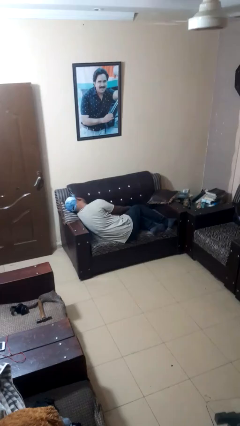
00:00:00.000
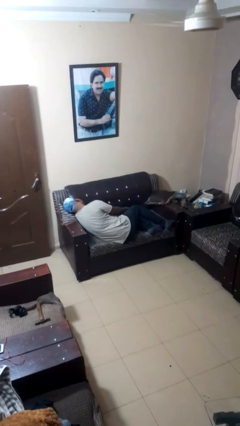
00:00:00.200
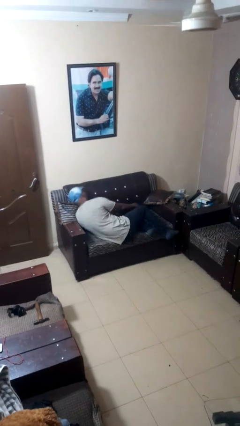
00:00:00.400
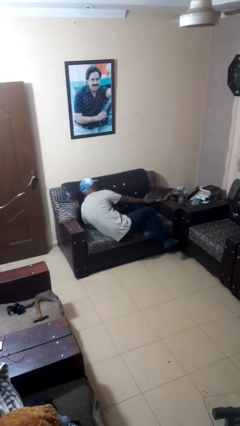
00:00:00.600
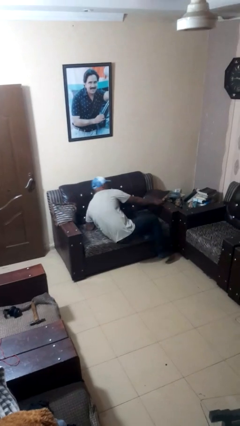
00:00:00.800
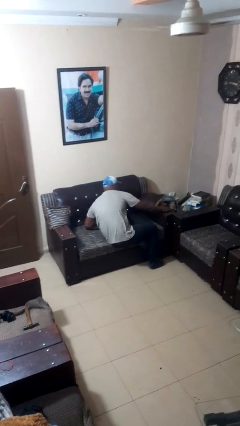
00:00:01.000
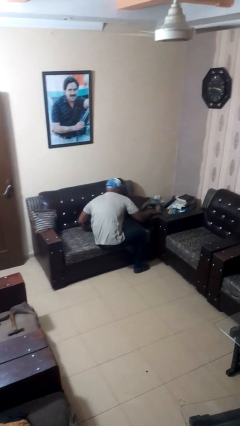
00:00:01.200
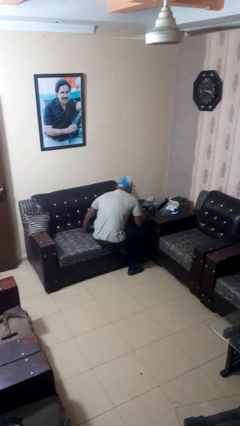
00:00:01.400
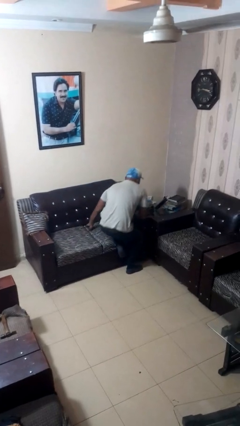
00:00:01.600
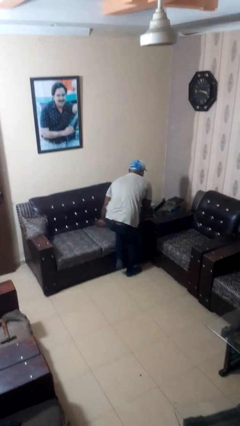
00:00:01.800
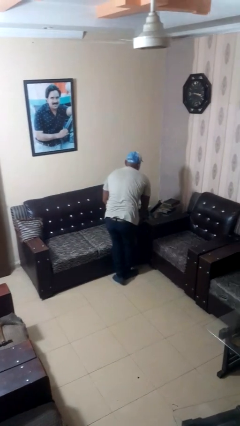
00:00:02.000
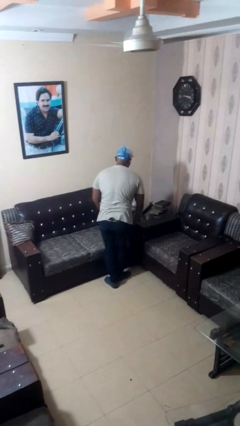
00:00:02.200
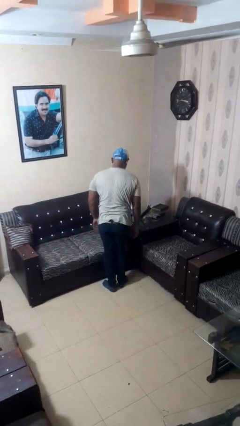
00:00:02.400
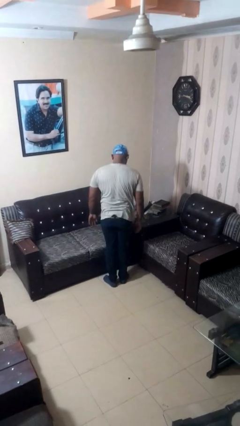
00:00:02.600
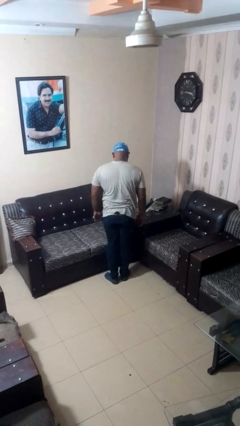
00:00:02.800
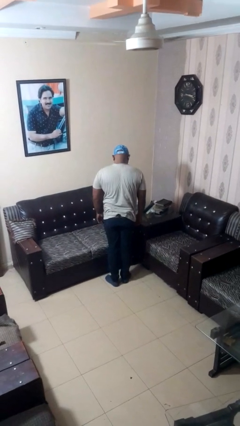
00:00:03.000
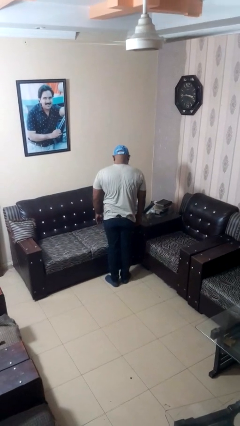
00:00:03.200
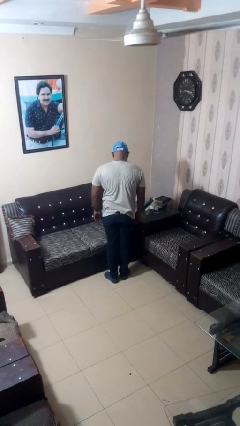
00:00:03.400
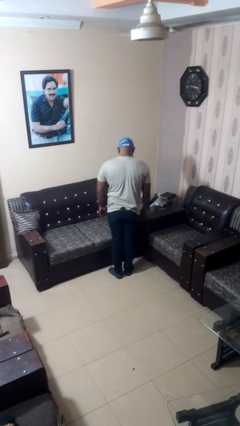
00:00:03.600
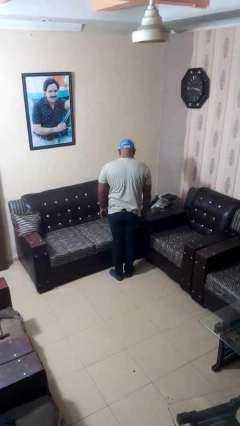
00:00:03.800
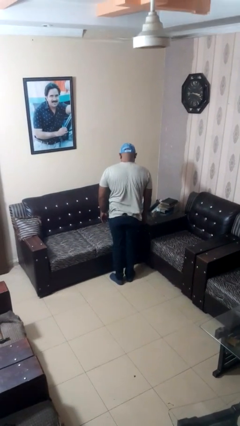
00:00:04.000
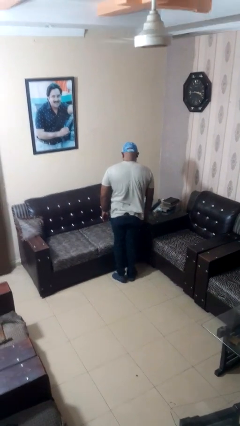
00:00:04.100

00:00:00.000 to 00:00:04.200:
person stands up

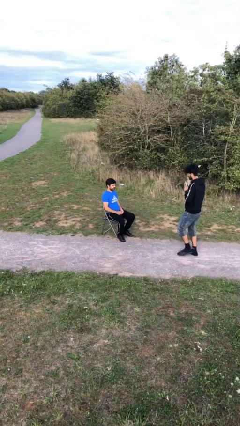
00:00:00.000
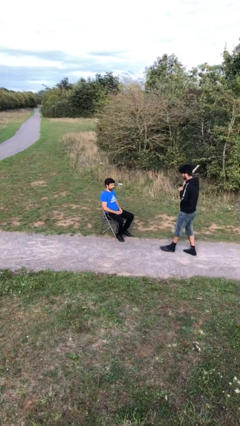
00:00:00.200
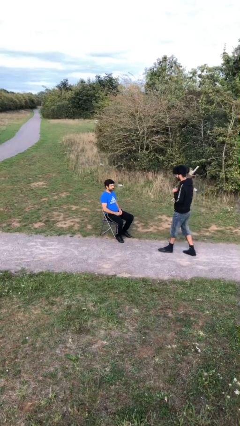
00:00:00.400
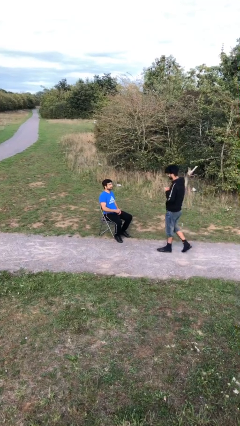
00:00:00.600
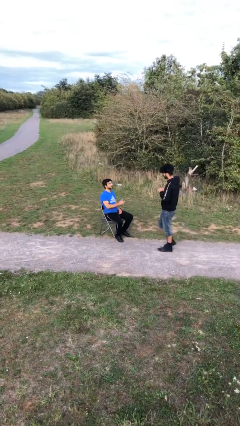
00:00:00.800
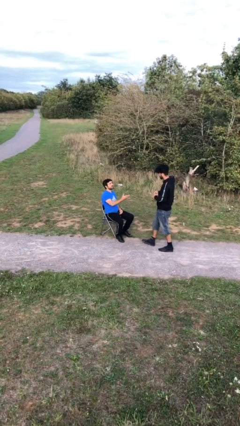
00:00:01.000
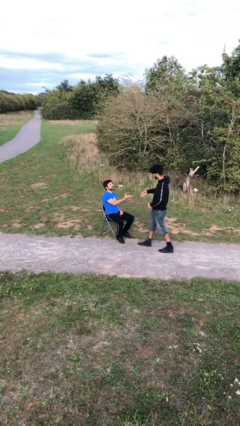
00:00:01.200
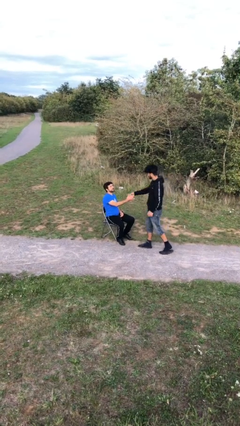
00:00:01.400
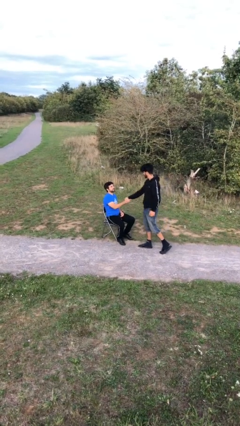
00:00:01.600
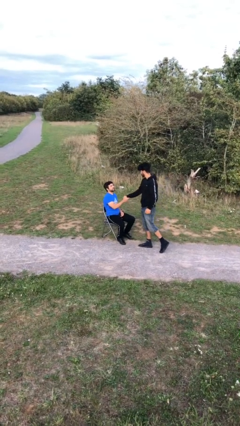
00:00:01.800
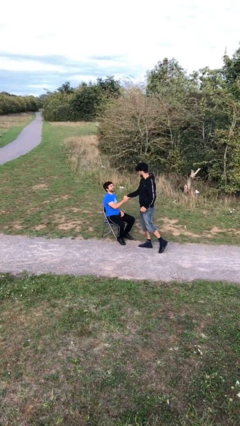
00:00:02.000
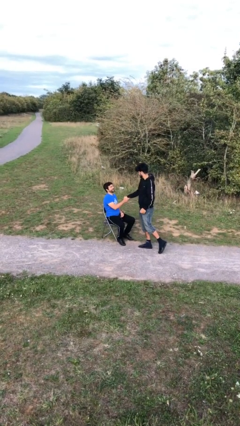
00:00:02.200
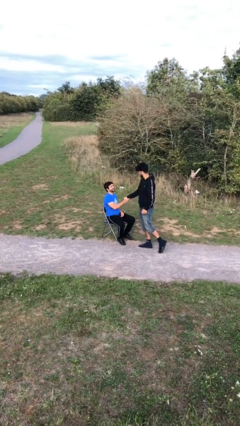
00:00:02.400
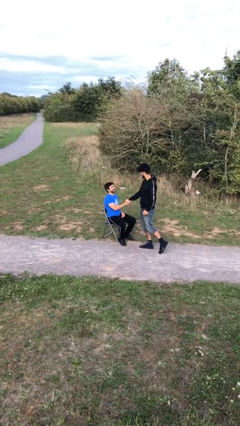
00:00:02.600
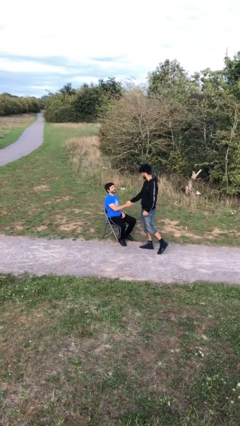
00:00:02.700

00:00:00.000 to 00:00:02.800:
person shakes hand

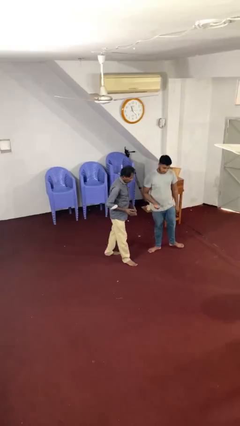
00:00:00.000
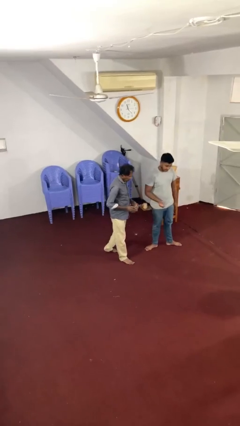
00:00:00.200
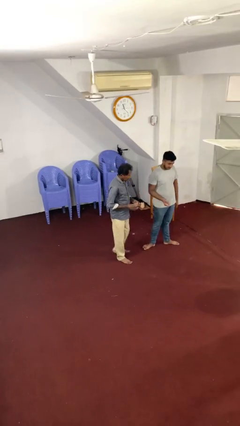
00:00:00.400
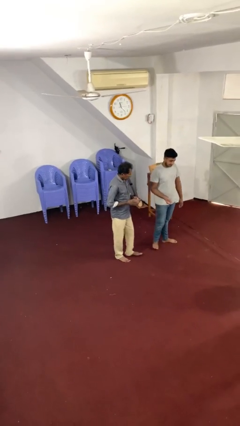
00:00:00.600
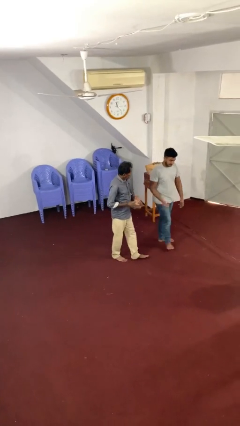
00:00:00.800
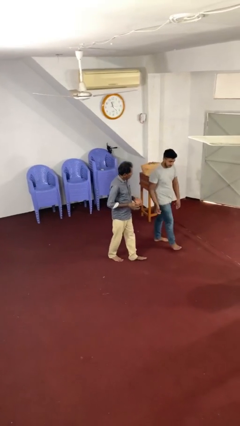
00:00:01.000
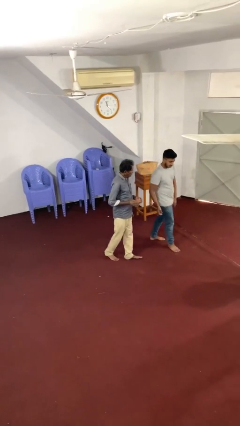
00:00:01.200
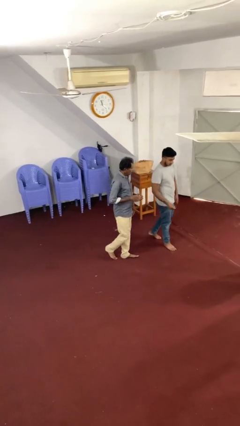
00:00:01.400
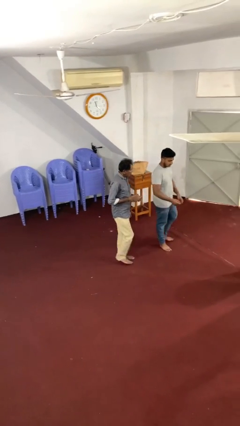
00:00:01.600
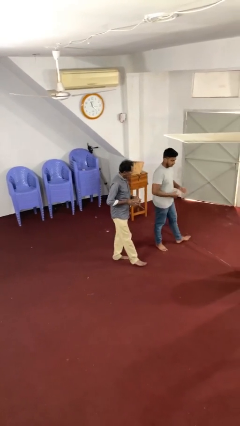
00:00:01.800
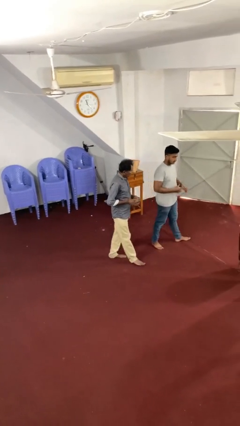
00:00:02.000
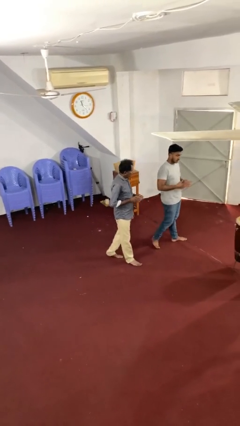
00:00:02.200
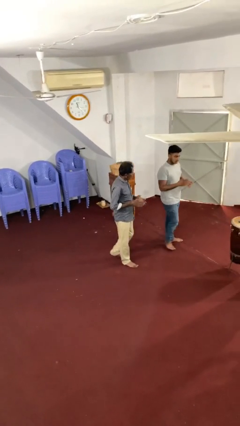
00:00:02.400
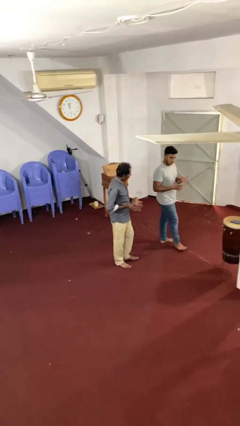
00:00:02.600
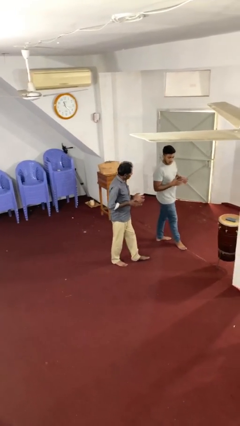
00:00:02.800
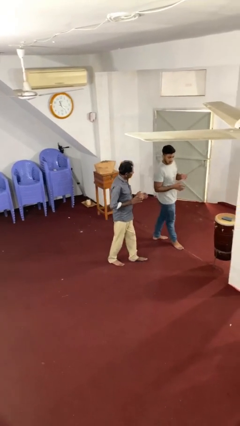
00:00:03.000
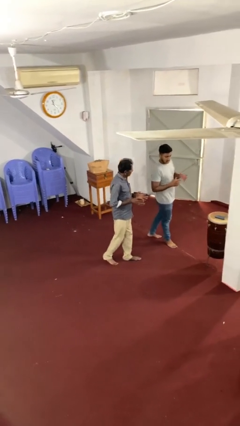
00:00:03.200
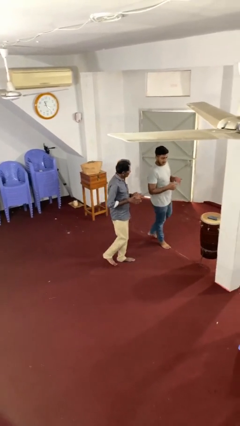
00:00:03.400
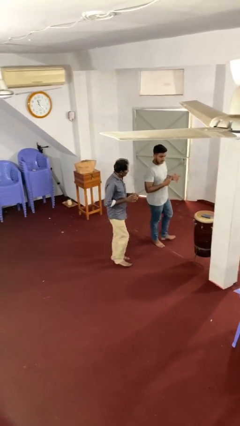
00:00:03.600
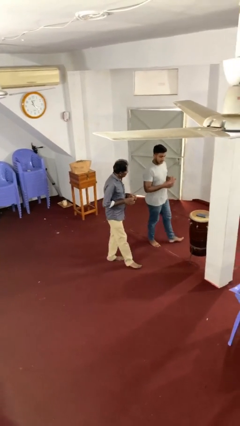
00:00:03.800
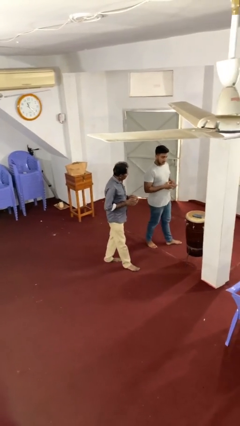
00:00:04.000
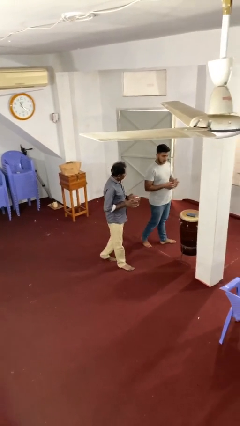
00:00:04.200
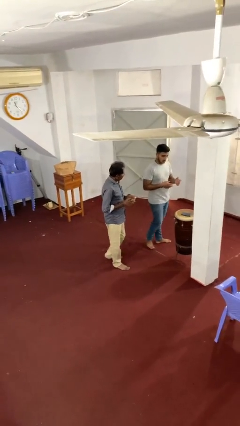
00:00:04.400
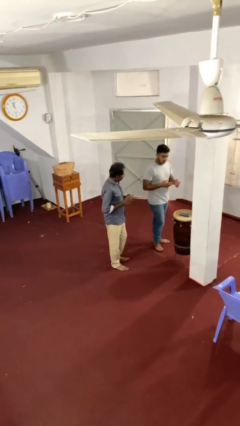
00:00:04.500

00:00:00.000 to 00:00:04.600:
person talks to person

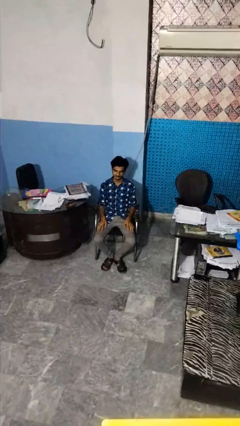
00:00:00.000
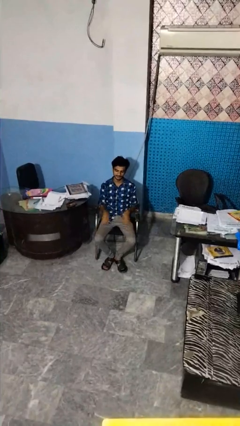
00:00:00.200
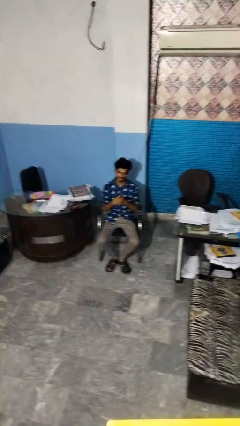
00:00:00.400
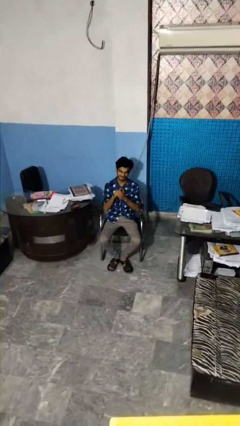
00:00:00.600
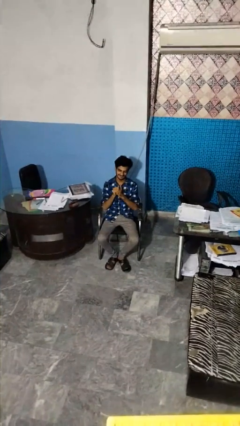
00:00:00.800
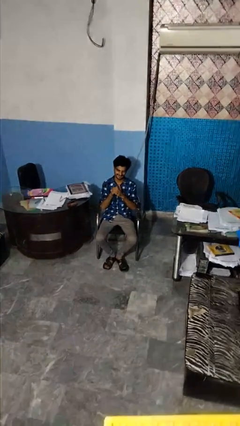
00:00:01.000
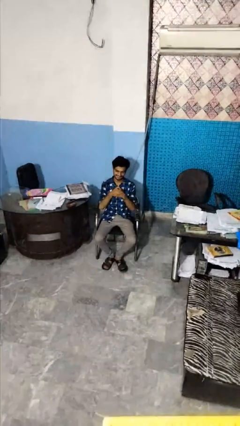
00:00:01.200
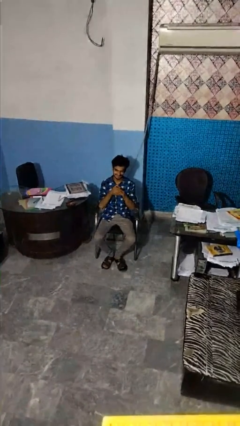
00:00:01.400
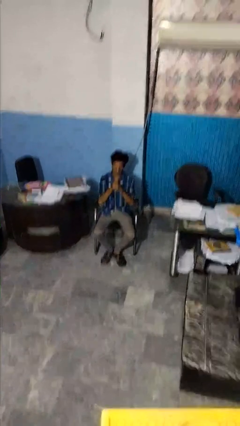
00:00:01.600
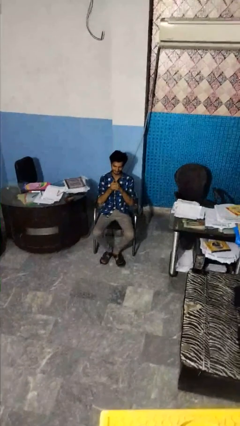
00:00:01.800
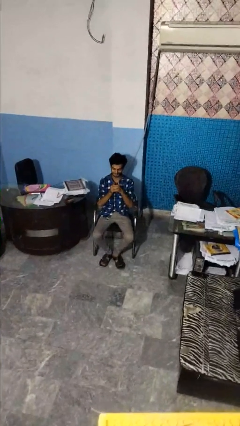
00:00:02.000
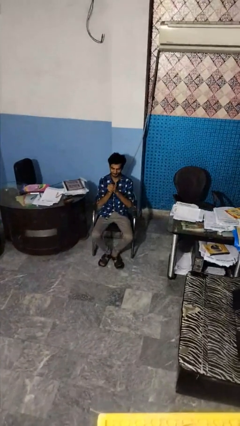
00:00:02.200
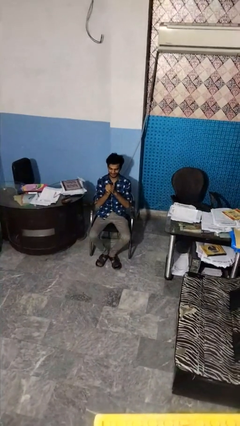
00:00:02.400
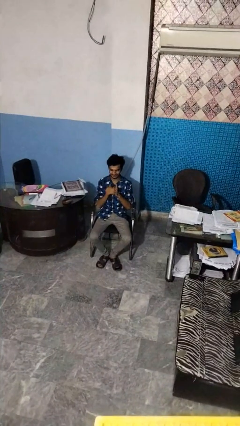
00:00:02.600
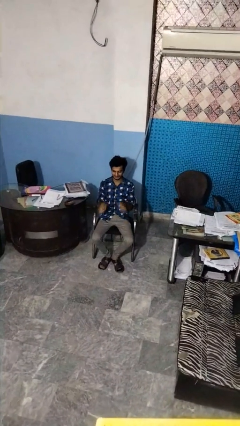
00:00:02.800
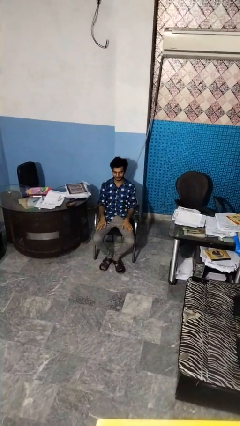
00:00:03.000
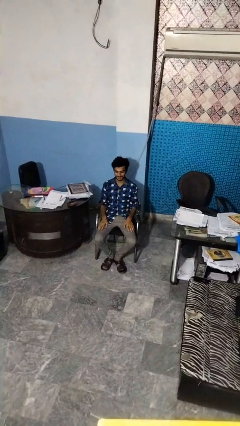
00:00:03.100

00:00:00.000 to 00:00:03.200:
person cracks knuckles

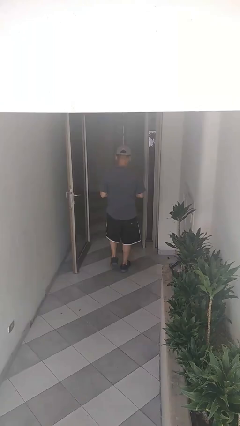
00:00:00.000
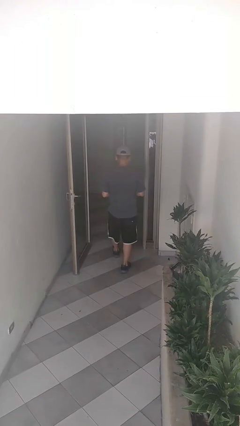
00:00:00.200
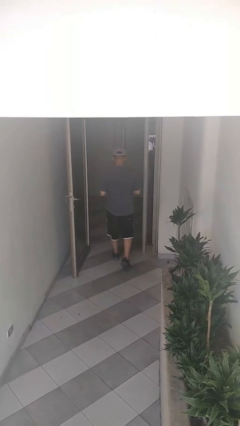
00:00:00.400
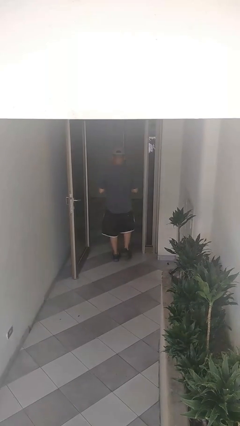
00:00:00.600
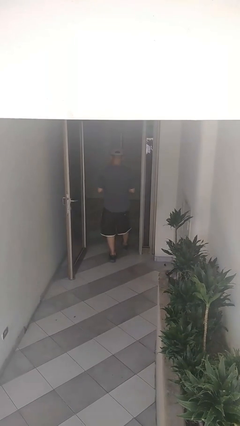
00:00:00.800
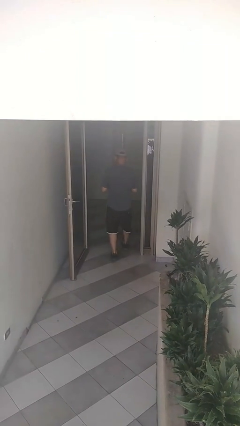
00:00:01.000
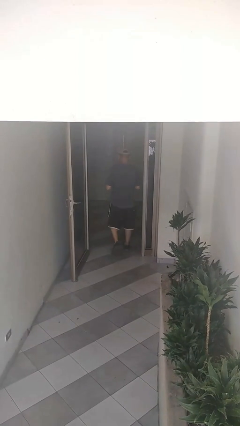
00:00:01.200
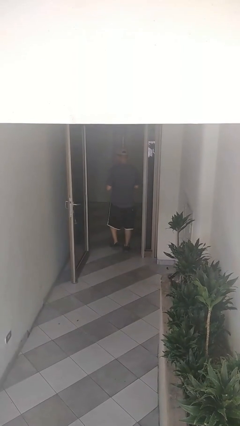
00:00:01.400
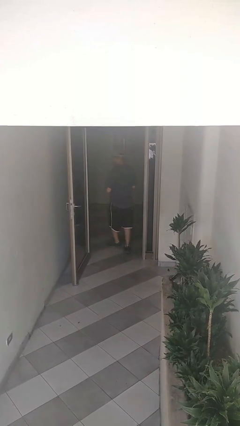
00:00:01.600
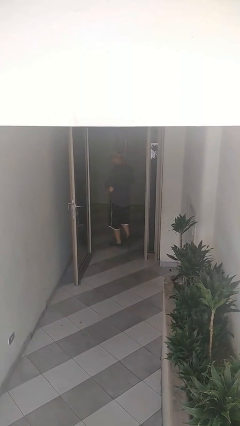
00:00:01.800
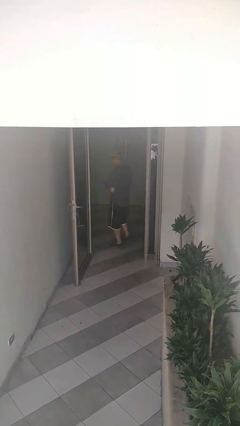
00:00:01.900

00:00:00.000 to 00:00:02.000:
person exits scene through structure

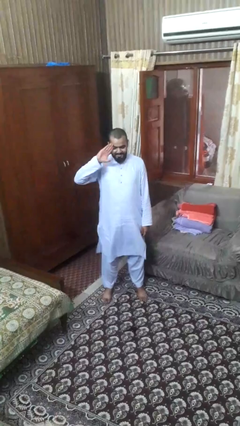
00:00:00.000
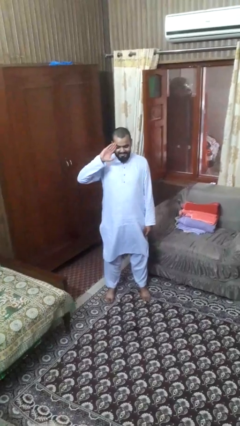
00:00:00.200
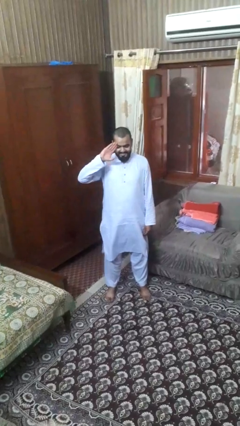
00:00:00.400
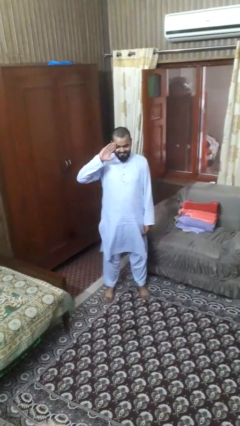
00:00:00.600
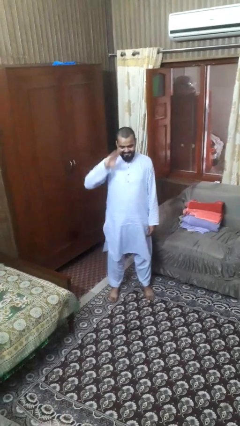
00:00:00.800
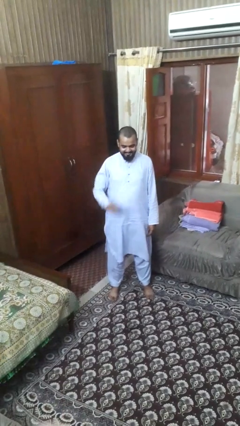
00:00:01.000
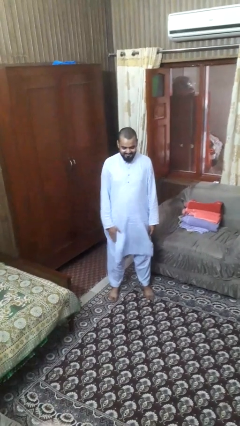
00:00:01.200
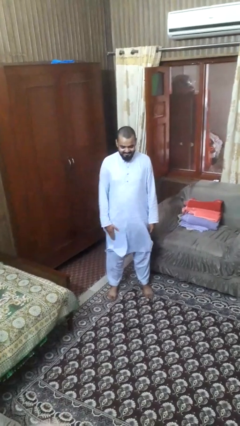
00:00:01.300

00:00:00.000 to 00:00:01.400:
person salutes
